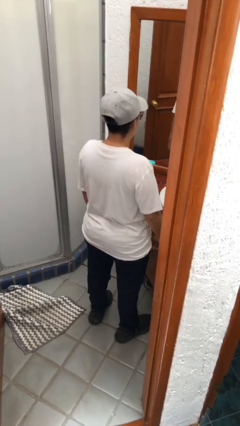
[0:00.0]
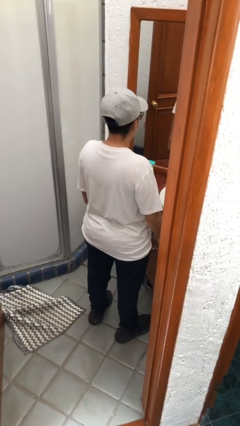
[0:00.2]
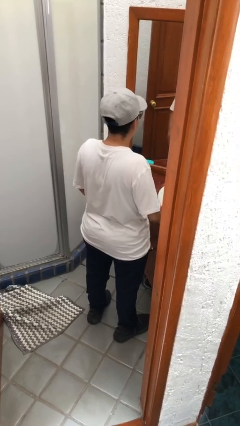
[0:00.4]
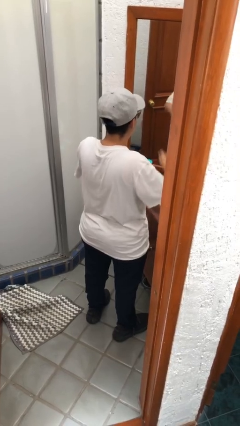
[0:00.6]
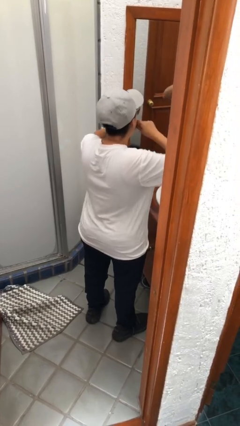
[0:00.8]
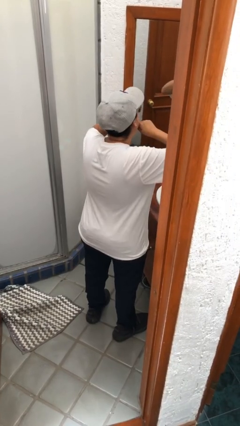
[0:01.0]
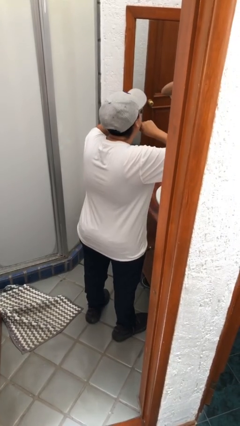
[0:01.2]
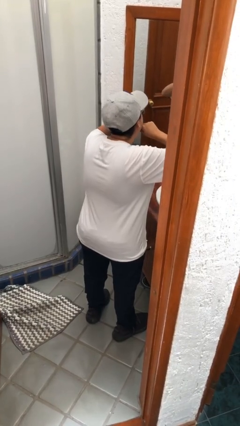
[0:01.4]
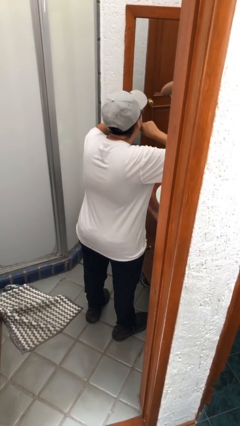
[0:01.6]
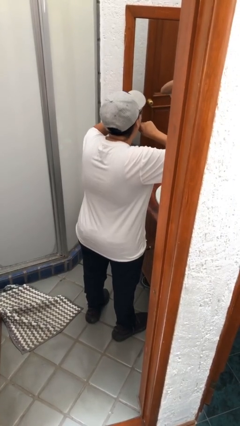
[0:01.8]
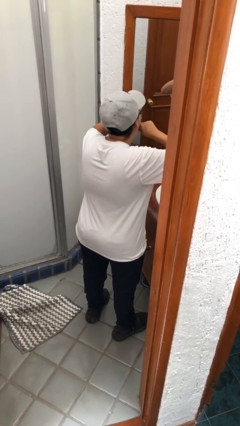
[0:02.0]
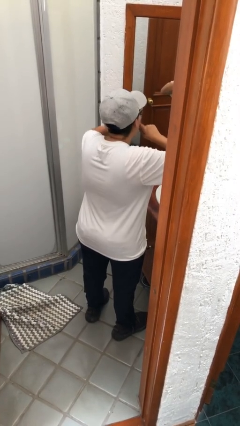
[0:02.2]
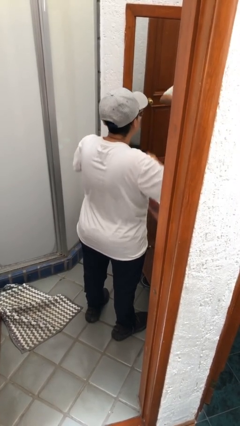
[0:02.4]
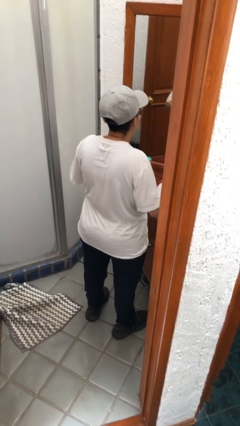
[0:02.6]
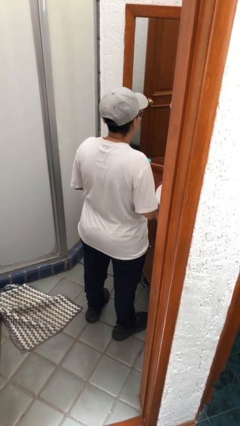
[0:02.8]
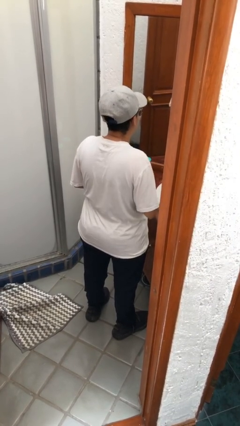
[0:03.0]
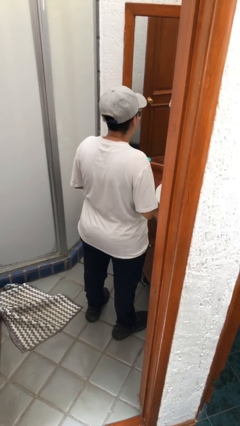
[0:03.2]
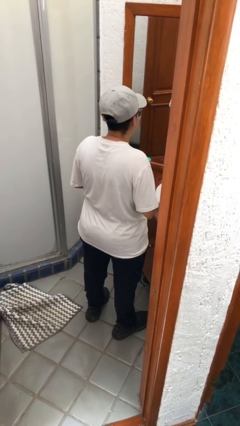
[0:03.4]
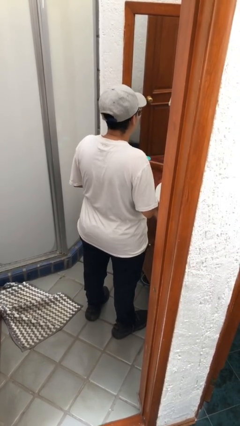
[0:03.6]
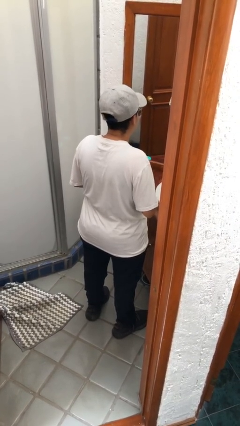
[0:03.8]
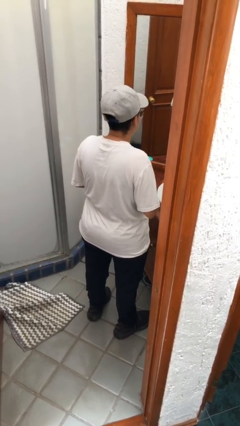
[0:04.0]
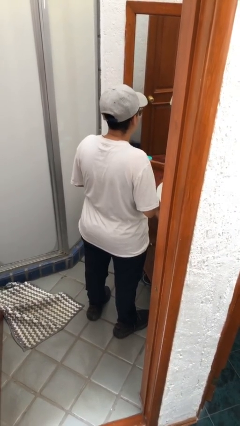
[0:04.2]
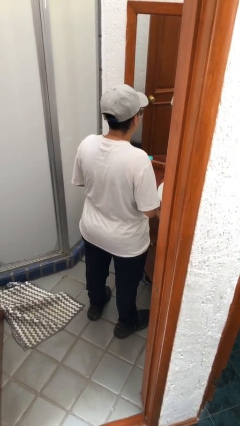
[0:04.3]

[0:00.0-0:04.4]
person flosses

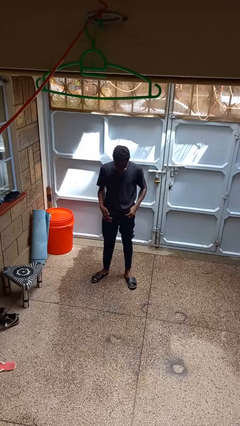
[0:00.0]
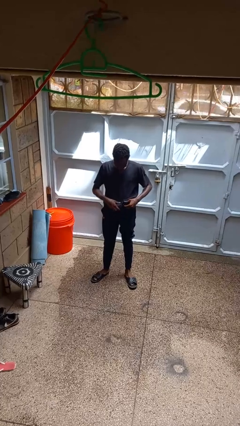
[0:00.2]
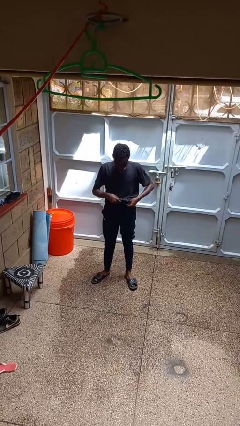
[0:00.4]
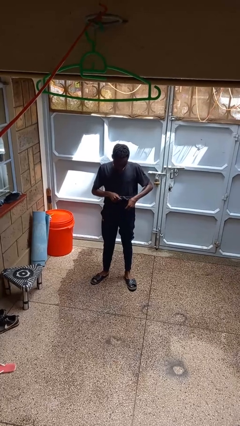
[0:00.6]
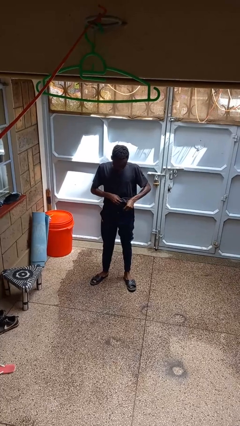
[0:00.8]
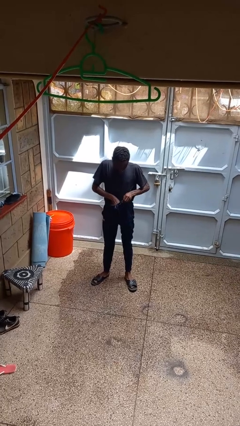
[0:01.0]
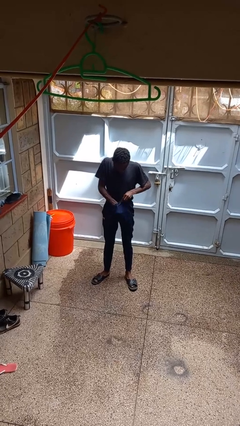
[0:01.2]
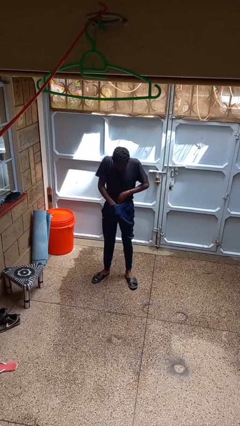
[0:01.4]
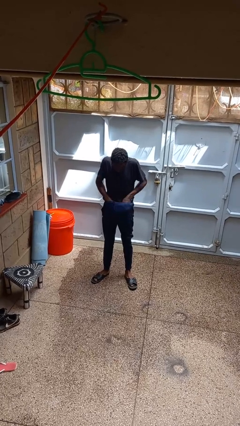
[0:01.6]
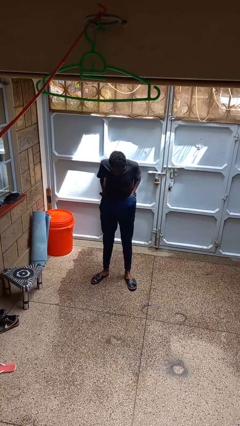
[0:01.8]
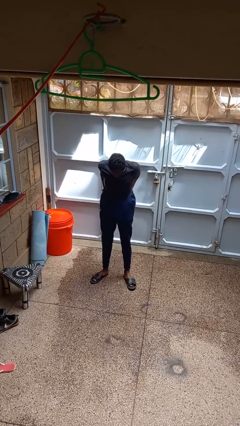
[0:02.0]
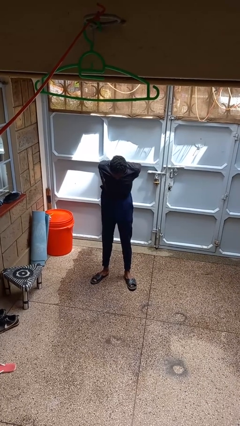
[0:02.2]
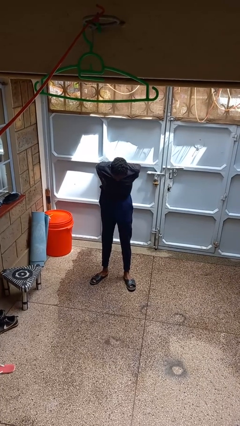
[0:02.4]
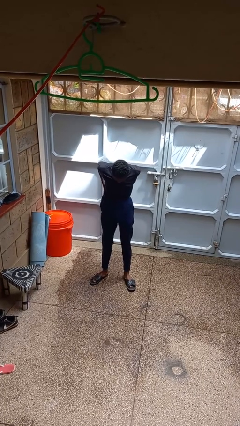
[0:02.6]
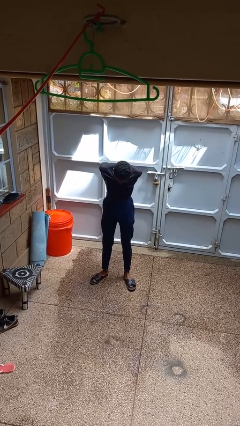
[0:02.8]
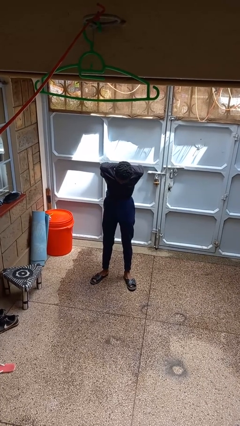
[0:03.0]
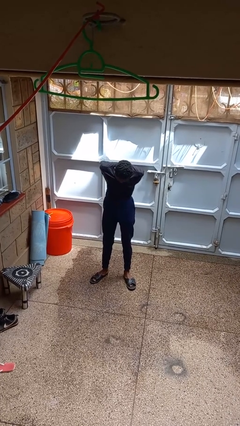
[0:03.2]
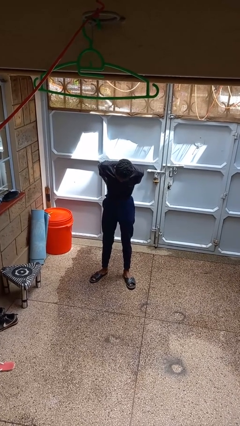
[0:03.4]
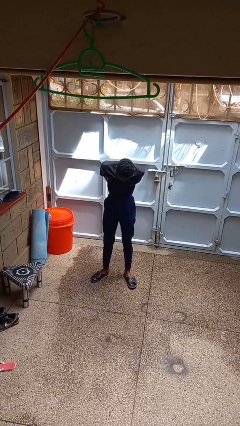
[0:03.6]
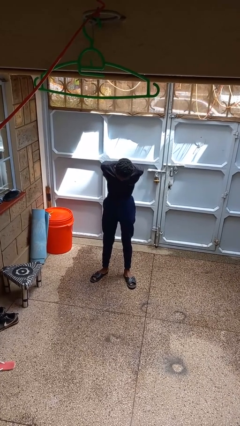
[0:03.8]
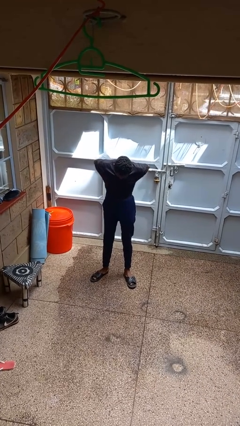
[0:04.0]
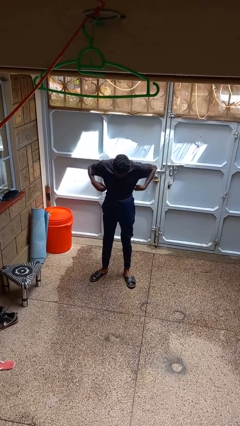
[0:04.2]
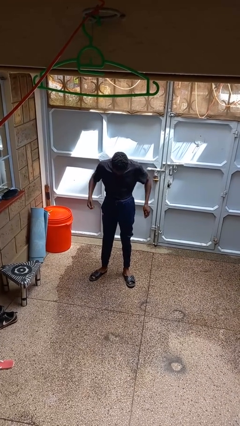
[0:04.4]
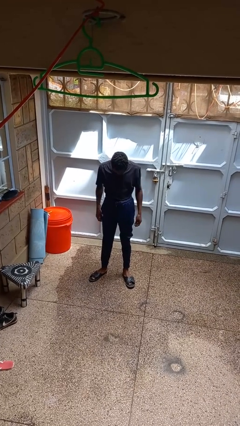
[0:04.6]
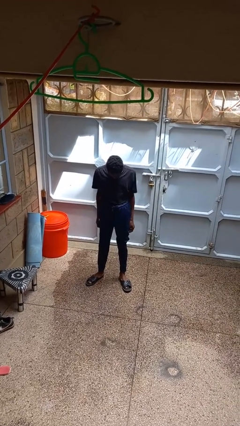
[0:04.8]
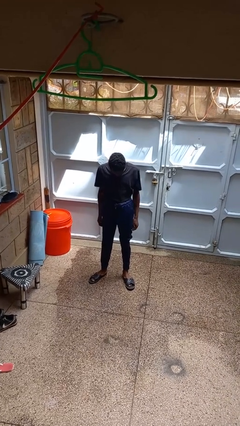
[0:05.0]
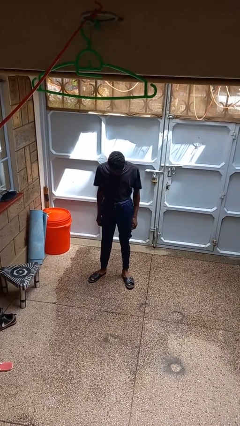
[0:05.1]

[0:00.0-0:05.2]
person tucks in shirt

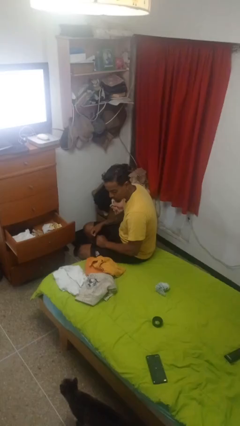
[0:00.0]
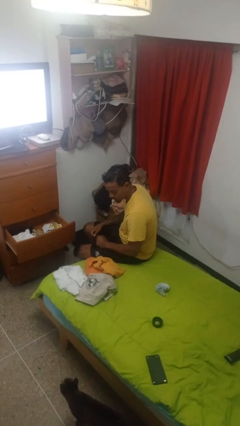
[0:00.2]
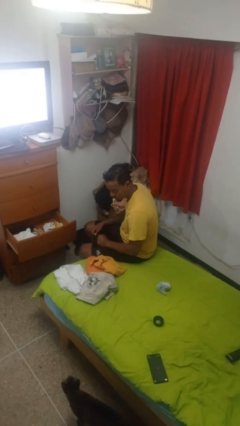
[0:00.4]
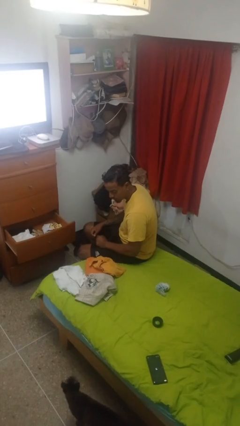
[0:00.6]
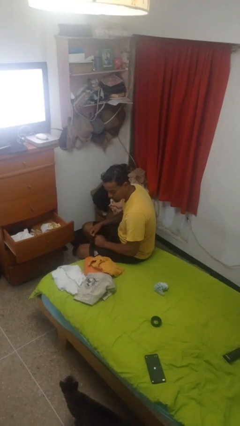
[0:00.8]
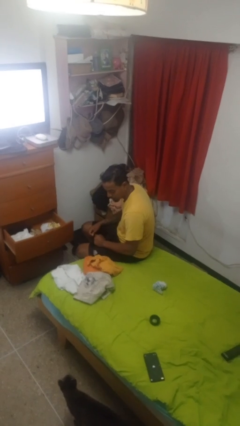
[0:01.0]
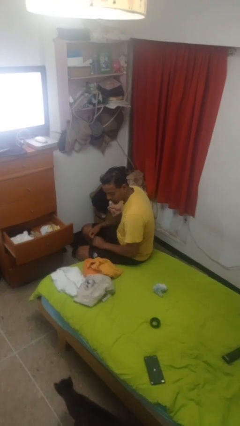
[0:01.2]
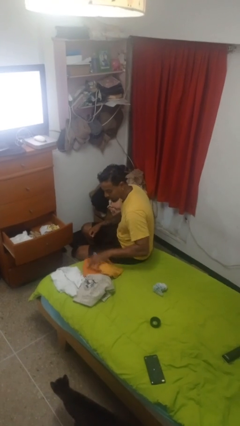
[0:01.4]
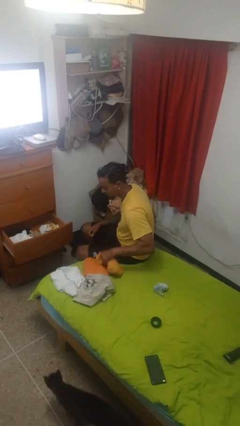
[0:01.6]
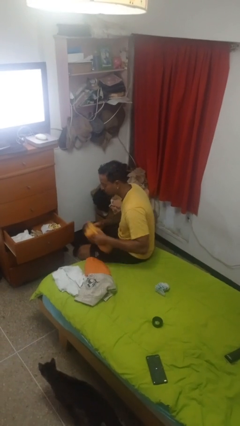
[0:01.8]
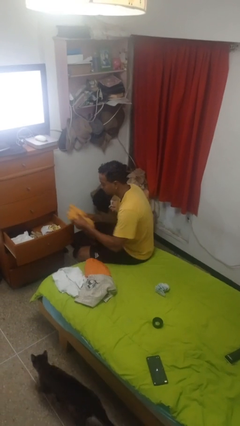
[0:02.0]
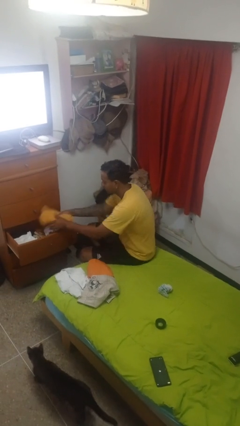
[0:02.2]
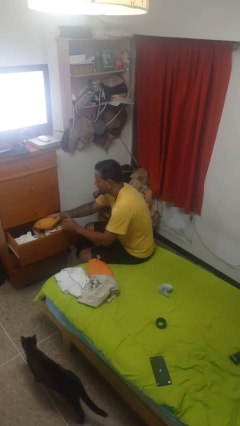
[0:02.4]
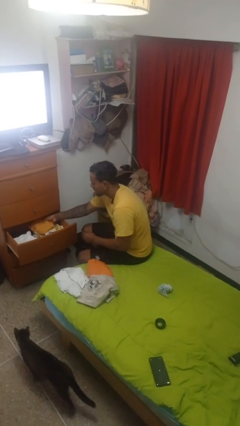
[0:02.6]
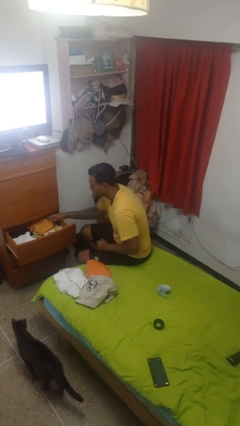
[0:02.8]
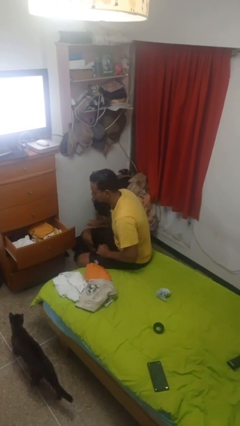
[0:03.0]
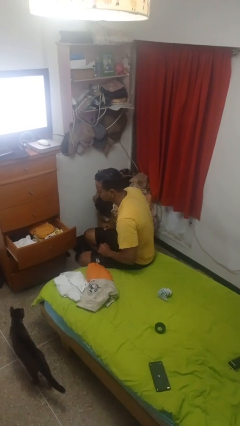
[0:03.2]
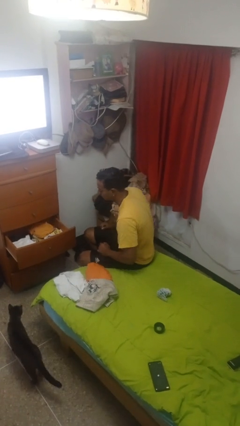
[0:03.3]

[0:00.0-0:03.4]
person puts clothes into dresser

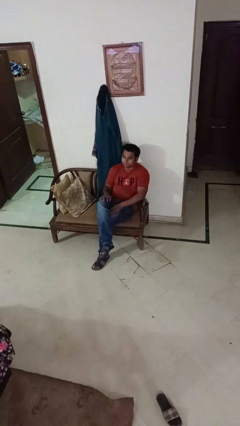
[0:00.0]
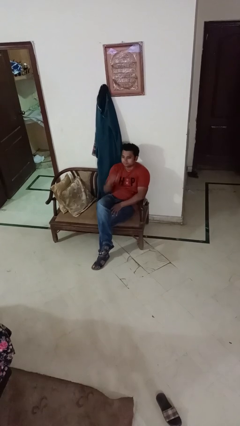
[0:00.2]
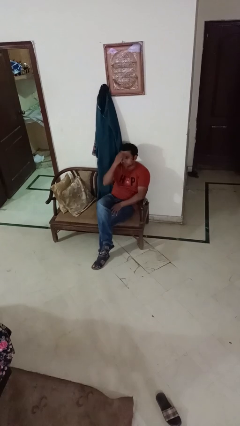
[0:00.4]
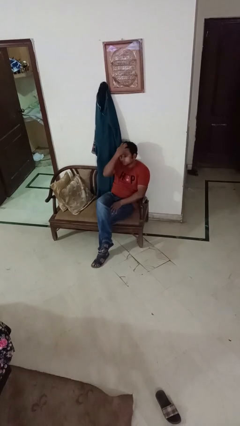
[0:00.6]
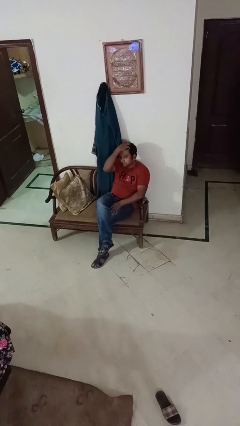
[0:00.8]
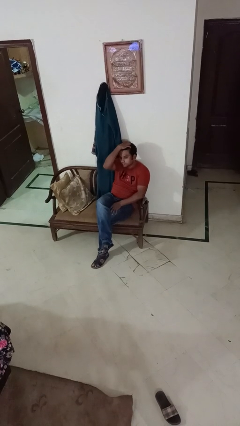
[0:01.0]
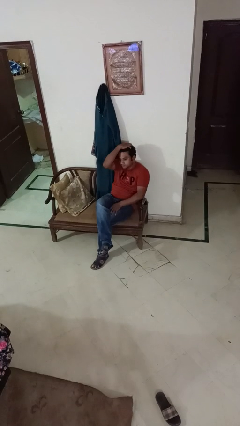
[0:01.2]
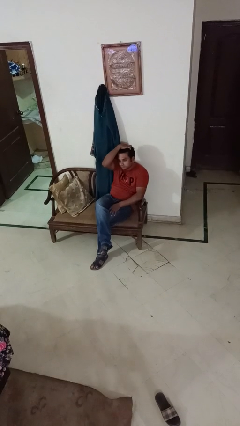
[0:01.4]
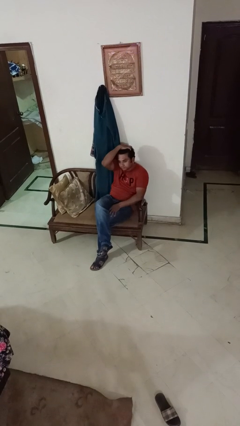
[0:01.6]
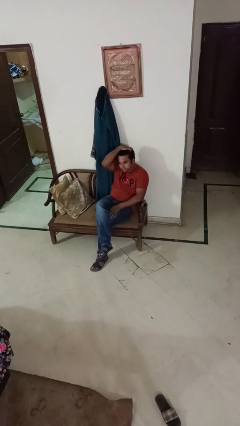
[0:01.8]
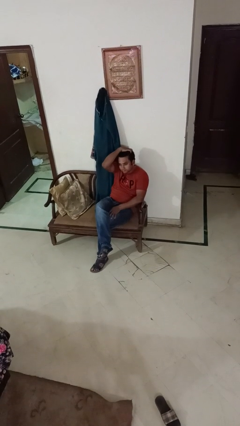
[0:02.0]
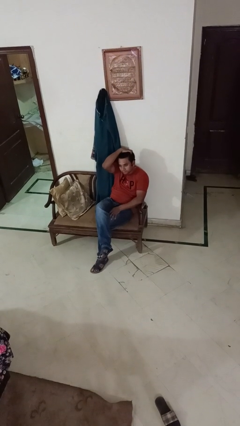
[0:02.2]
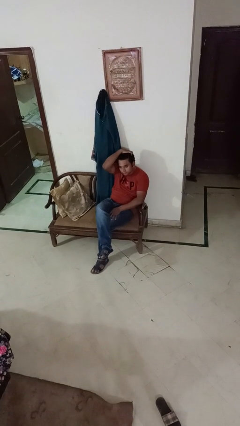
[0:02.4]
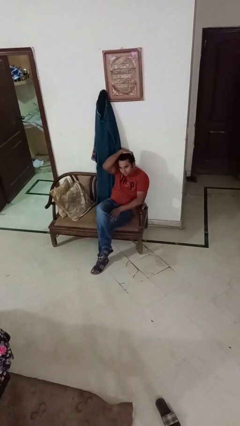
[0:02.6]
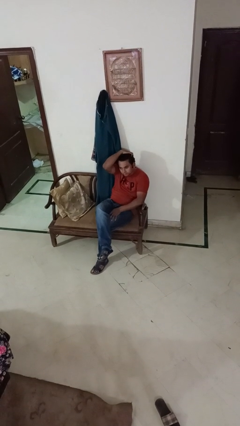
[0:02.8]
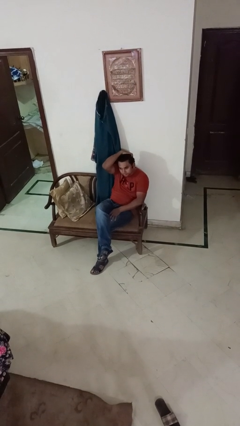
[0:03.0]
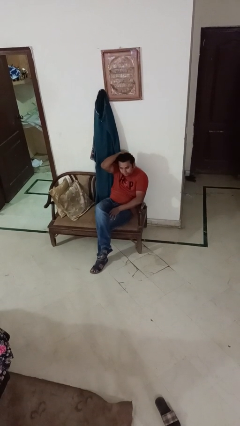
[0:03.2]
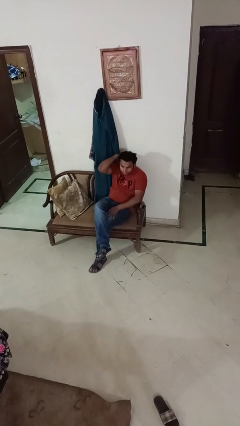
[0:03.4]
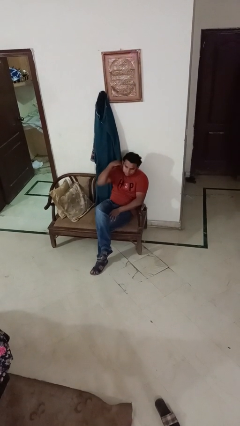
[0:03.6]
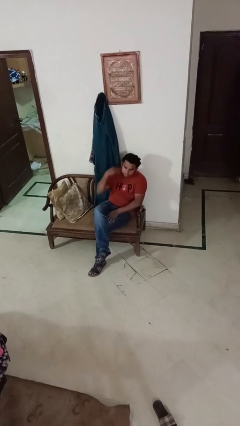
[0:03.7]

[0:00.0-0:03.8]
person strokes hair

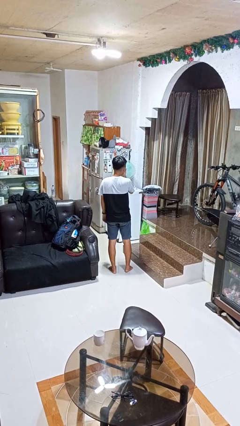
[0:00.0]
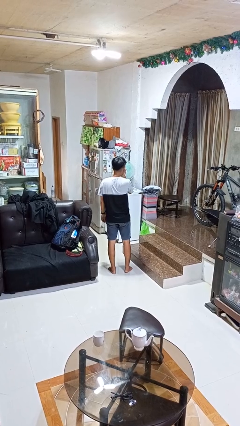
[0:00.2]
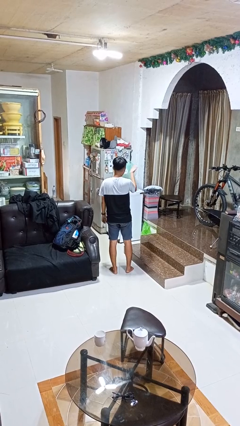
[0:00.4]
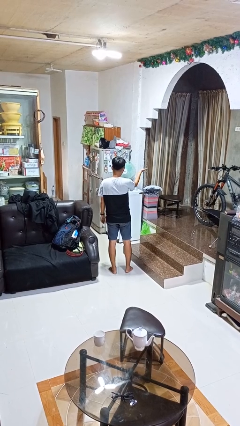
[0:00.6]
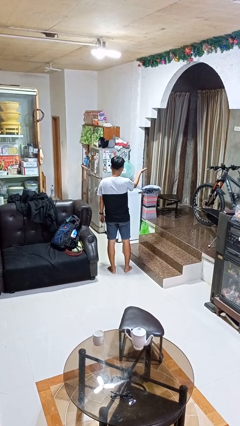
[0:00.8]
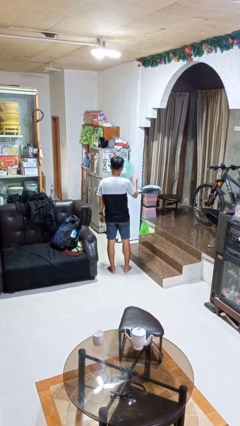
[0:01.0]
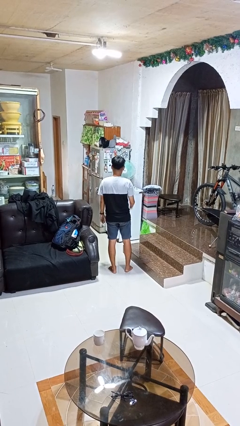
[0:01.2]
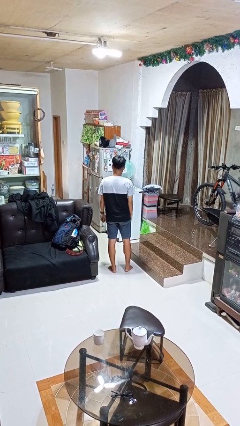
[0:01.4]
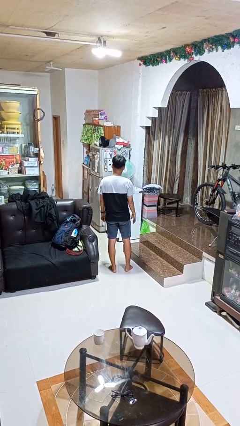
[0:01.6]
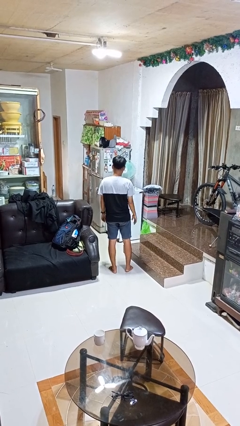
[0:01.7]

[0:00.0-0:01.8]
person gestures blow kiss
